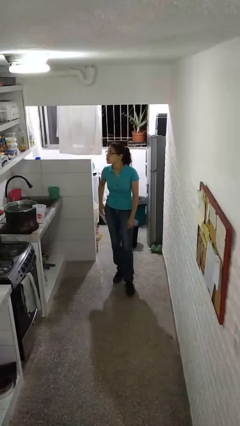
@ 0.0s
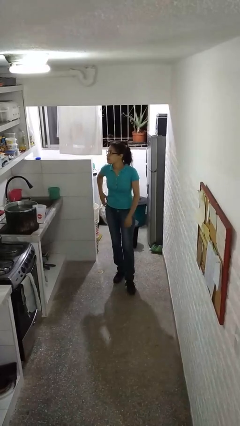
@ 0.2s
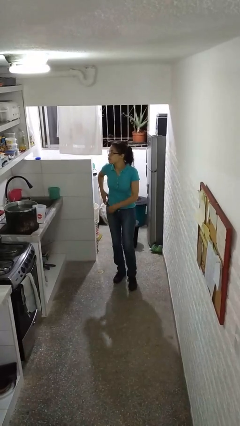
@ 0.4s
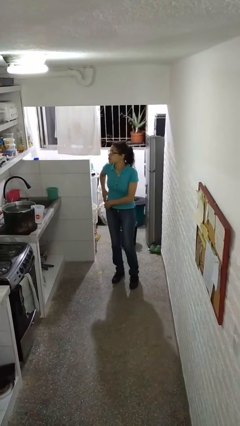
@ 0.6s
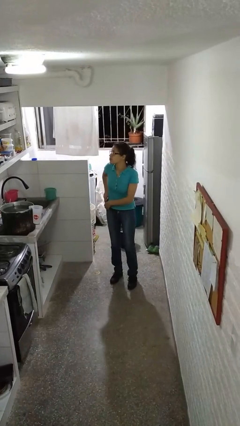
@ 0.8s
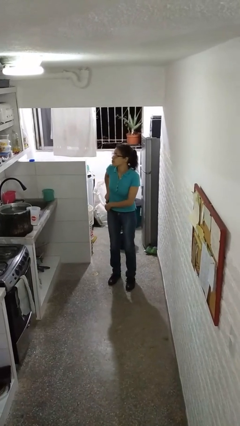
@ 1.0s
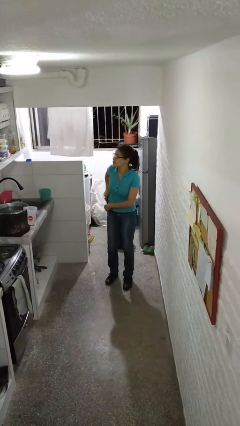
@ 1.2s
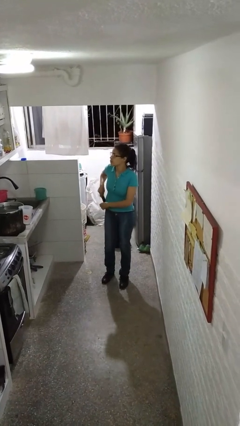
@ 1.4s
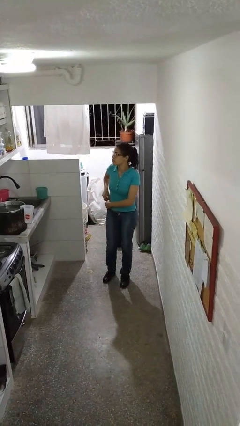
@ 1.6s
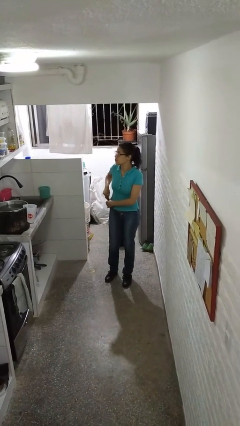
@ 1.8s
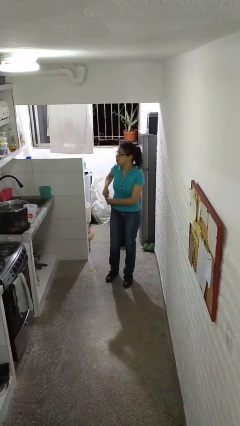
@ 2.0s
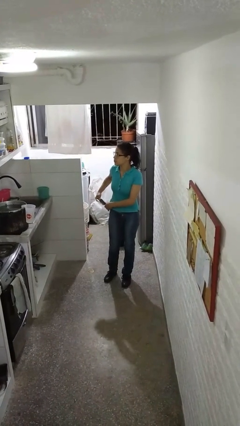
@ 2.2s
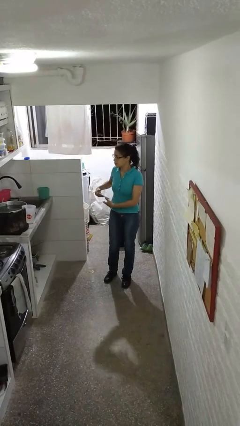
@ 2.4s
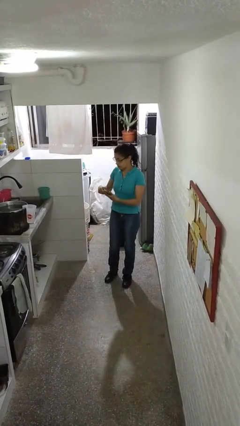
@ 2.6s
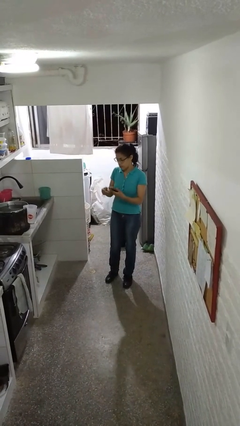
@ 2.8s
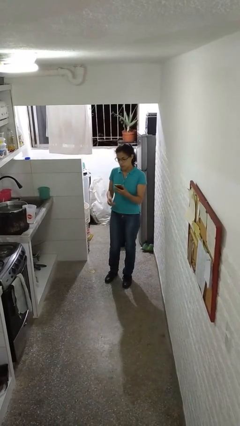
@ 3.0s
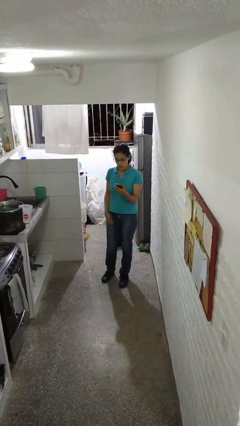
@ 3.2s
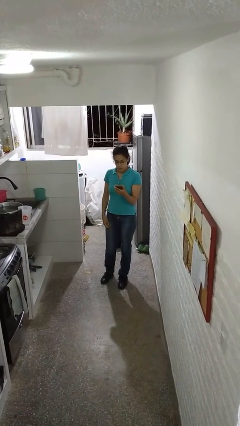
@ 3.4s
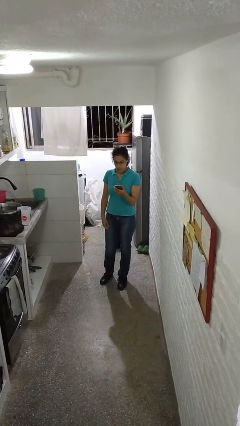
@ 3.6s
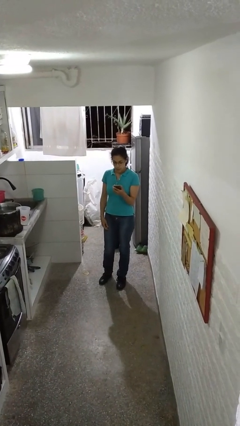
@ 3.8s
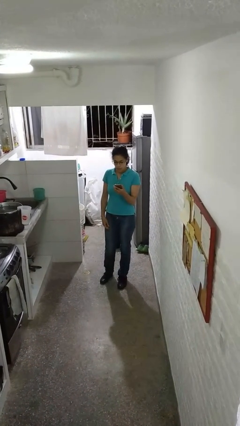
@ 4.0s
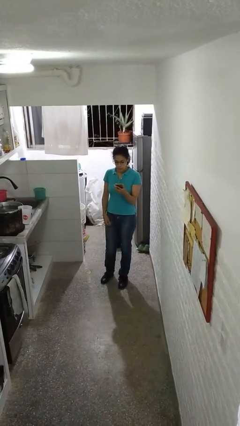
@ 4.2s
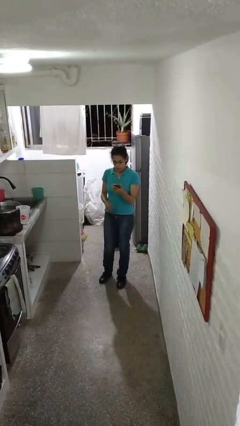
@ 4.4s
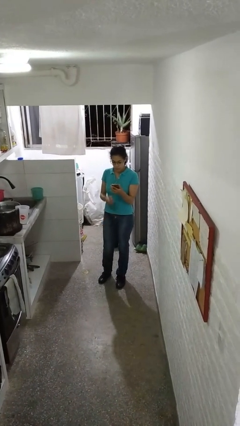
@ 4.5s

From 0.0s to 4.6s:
person takes phone from pocket

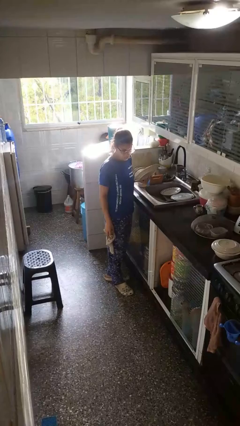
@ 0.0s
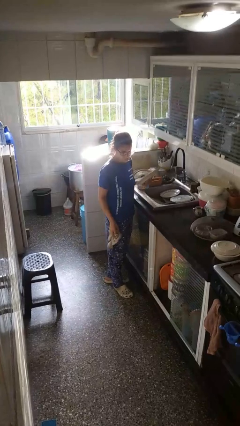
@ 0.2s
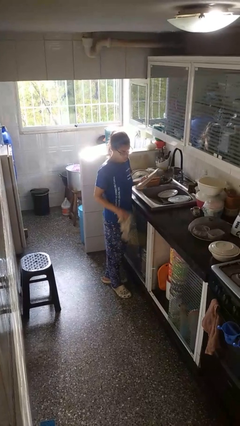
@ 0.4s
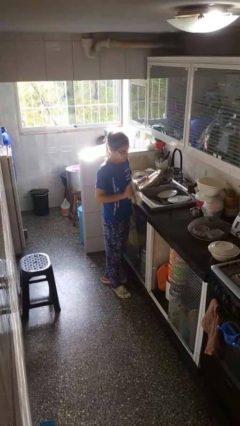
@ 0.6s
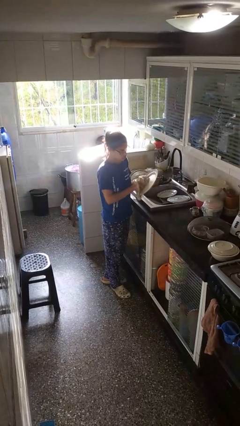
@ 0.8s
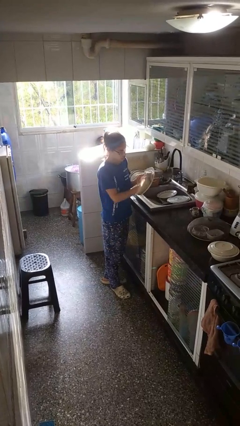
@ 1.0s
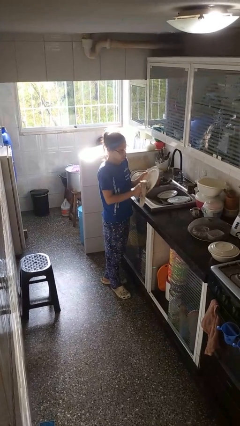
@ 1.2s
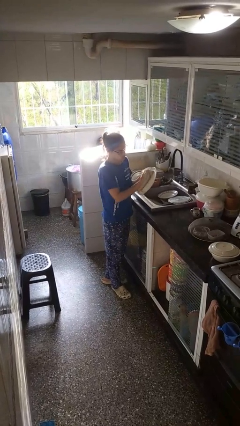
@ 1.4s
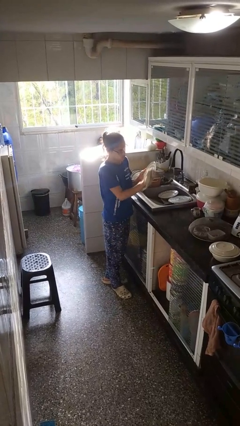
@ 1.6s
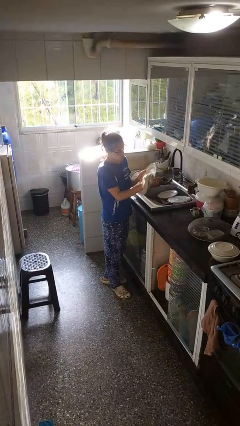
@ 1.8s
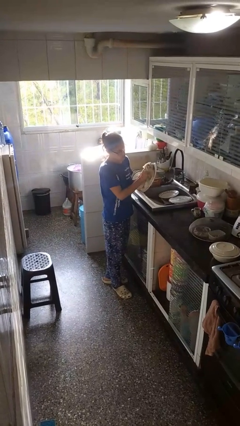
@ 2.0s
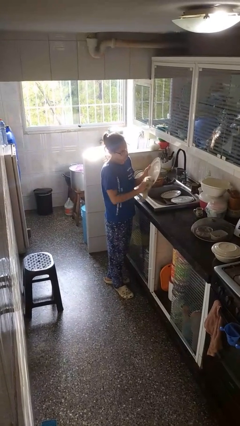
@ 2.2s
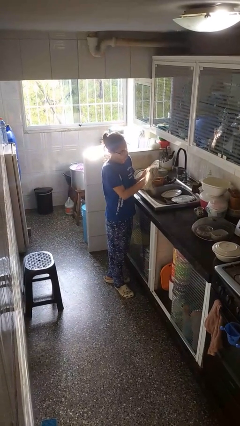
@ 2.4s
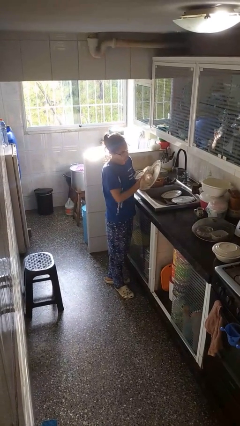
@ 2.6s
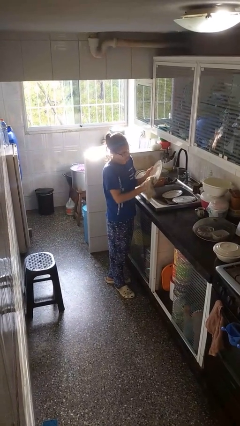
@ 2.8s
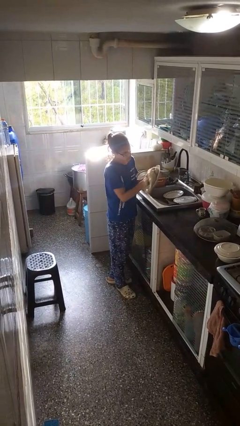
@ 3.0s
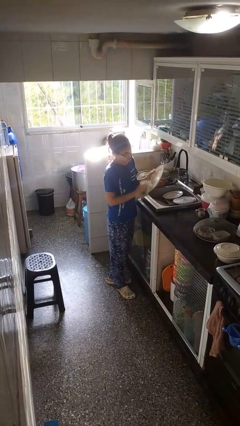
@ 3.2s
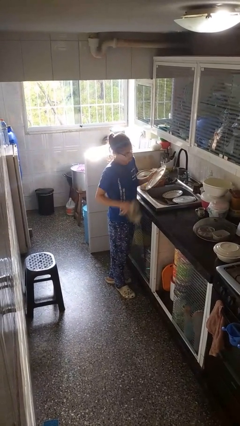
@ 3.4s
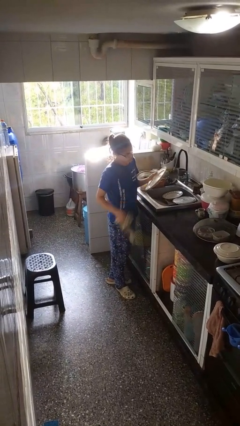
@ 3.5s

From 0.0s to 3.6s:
person dries dish

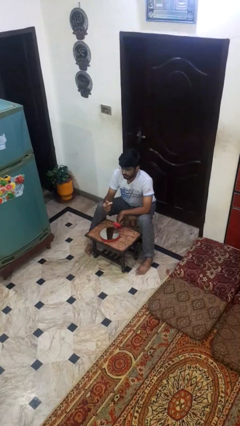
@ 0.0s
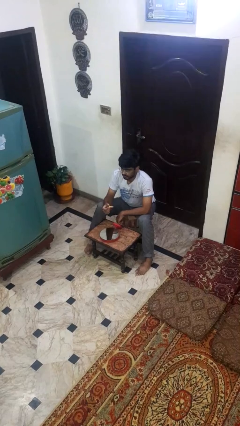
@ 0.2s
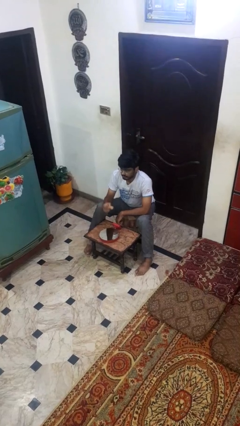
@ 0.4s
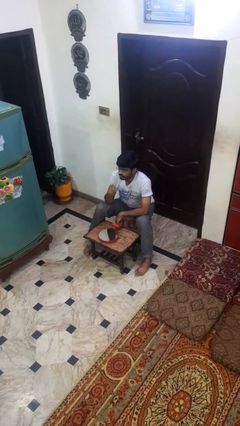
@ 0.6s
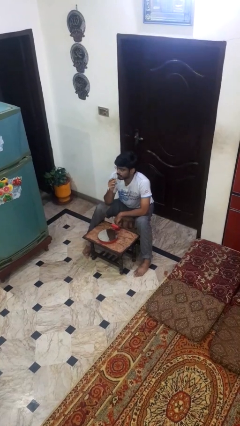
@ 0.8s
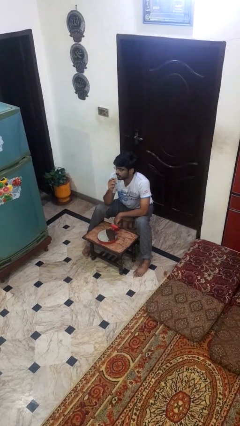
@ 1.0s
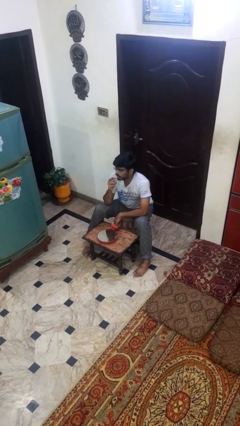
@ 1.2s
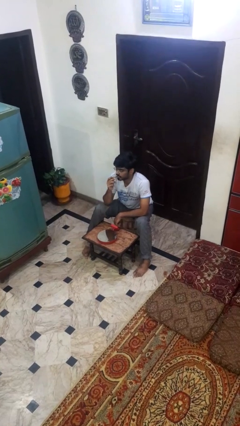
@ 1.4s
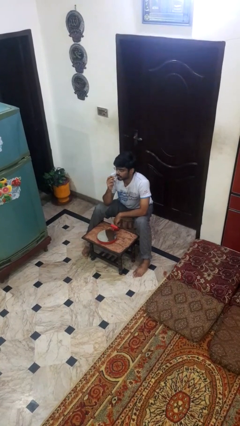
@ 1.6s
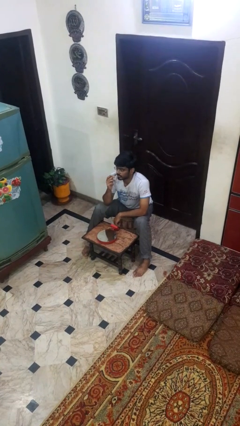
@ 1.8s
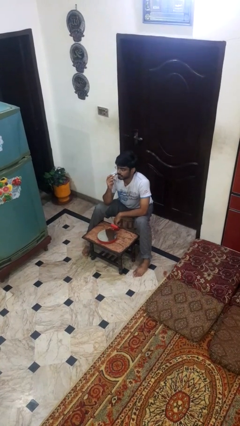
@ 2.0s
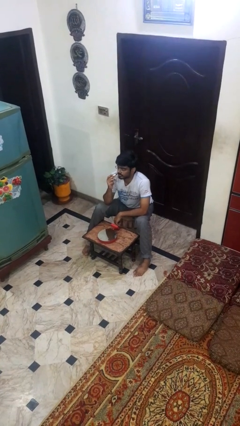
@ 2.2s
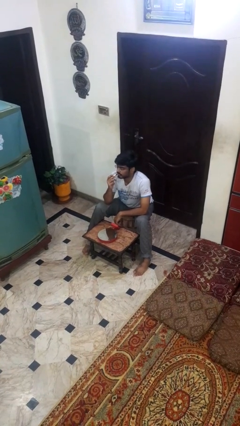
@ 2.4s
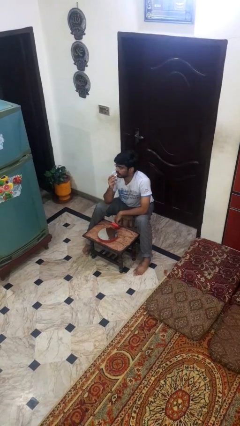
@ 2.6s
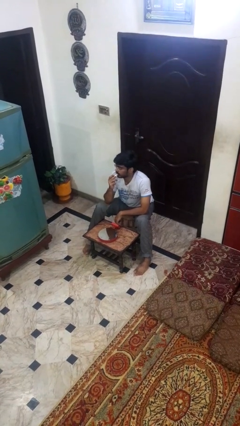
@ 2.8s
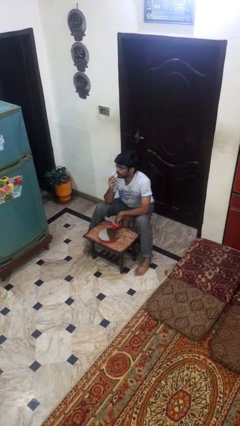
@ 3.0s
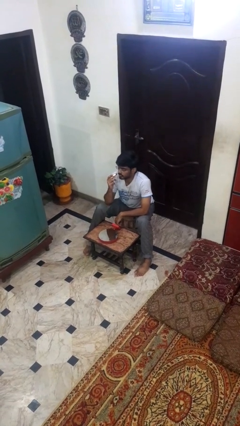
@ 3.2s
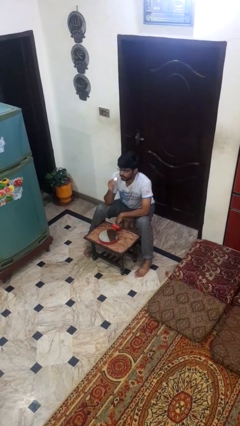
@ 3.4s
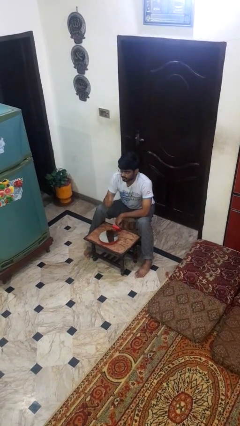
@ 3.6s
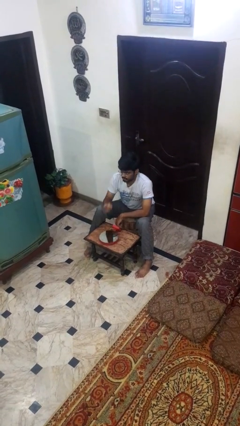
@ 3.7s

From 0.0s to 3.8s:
person applies lip makeup

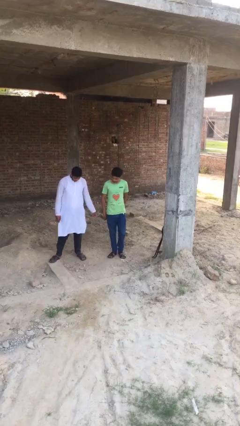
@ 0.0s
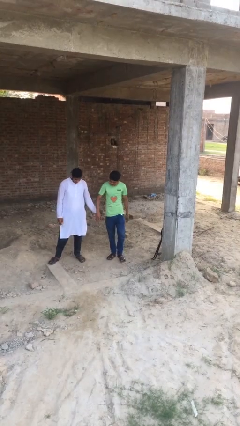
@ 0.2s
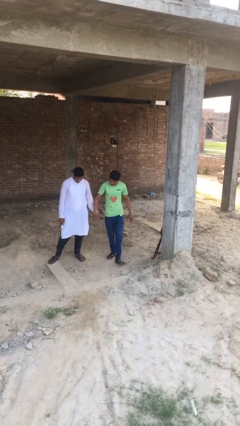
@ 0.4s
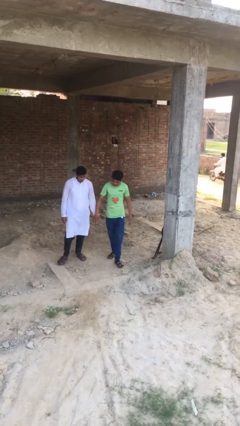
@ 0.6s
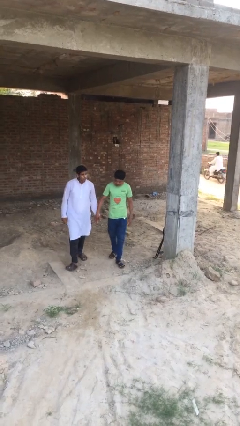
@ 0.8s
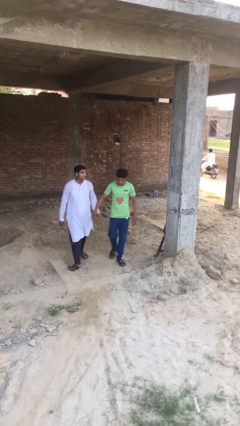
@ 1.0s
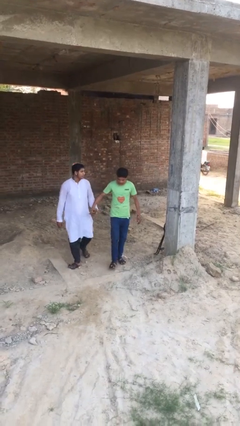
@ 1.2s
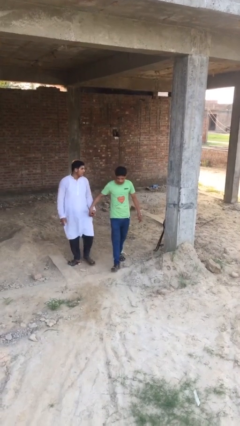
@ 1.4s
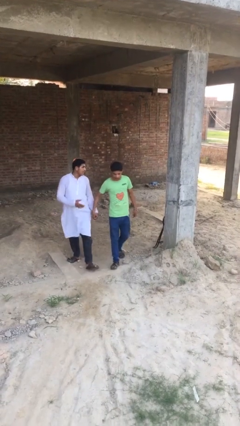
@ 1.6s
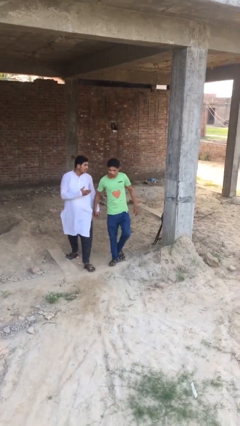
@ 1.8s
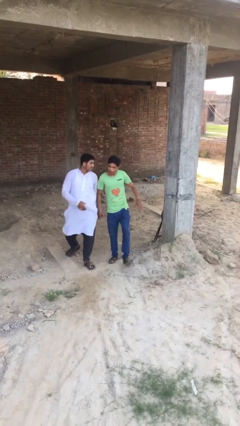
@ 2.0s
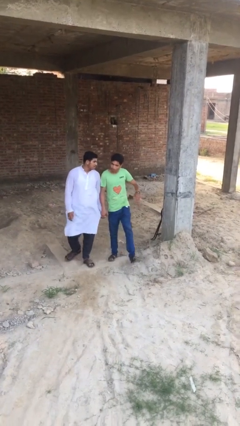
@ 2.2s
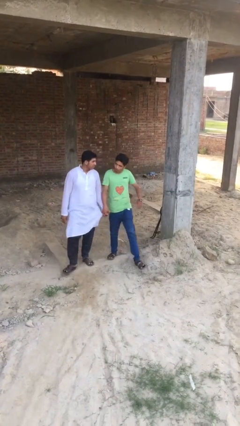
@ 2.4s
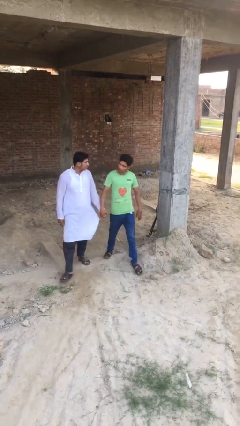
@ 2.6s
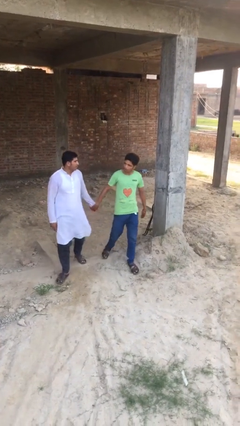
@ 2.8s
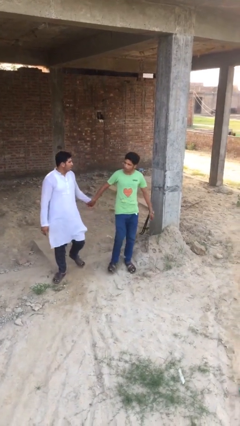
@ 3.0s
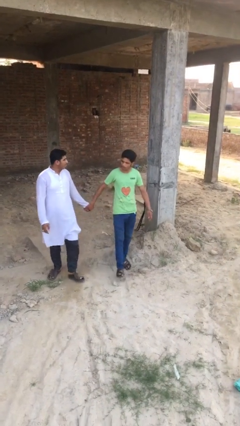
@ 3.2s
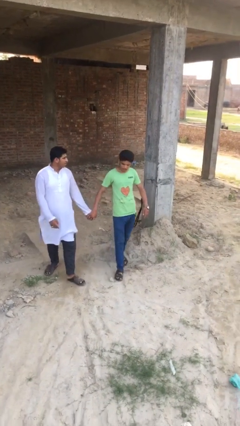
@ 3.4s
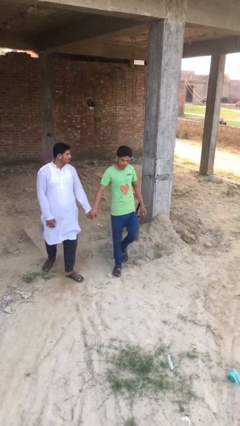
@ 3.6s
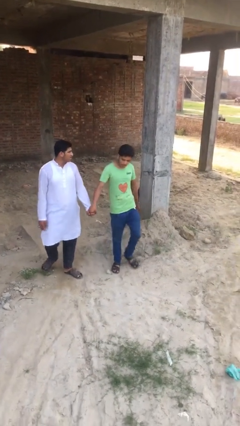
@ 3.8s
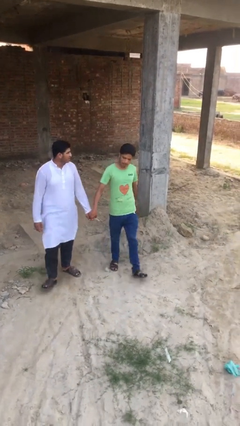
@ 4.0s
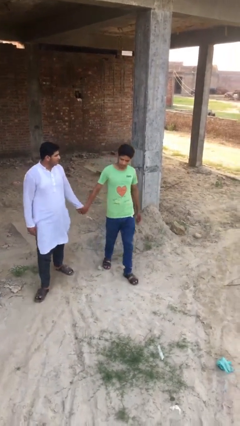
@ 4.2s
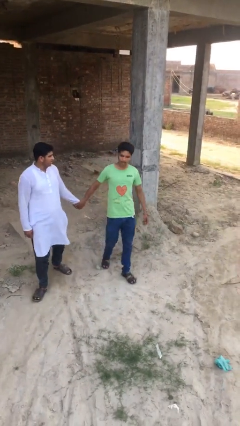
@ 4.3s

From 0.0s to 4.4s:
person holds hand

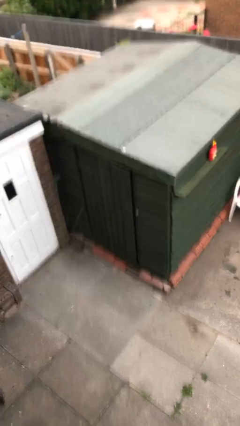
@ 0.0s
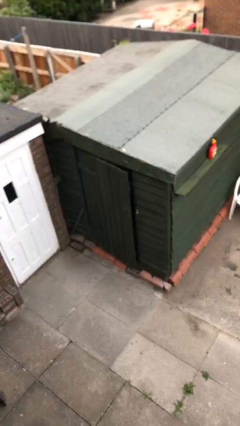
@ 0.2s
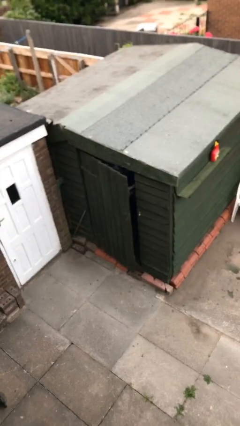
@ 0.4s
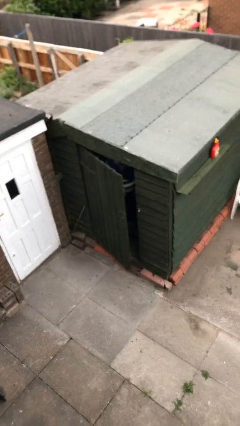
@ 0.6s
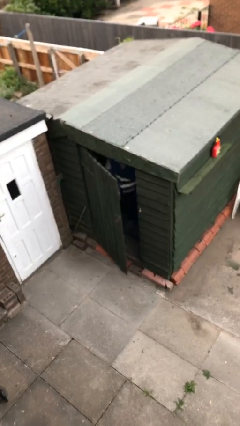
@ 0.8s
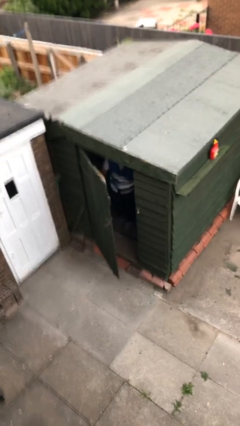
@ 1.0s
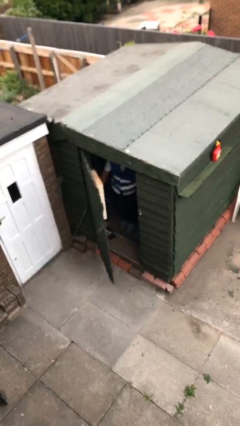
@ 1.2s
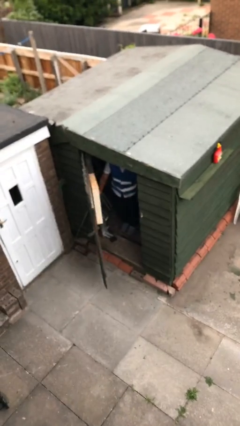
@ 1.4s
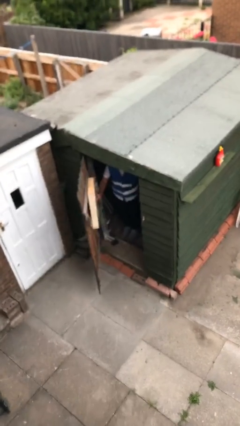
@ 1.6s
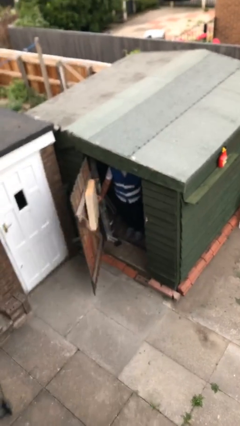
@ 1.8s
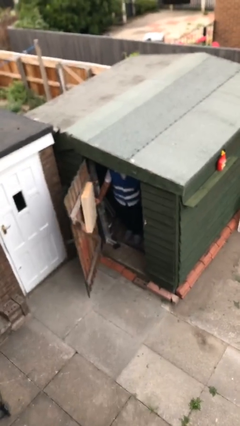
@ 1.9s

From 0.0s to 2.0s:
person opens facility door
